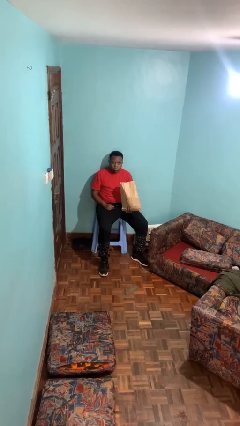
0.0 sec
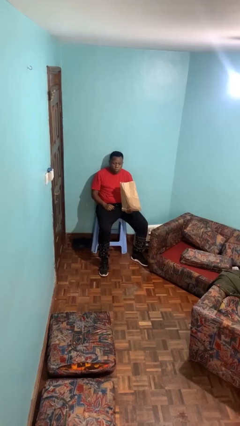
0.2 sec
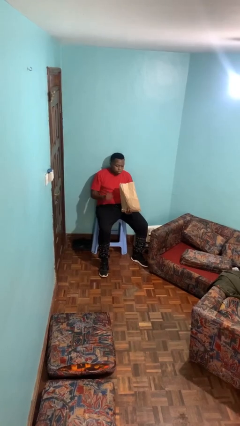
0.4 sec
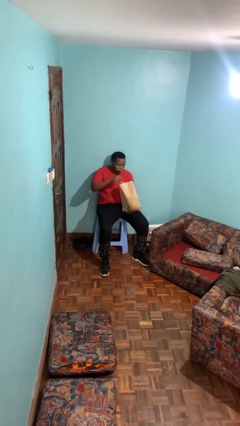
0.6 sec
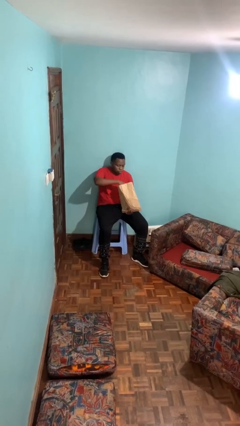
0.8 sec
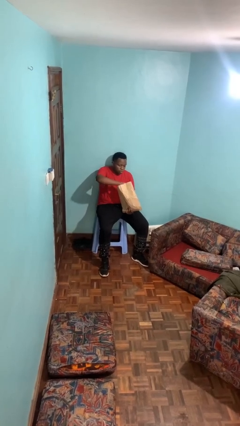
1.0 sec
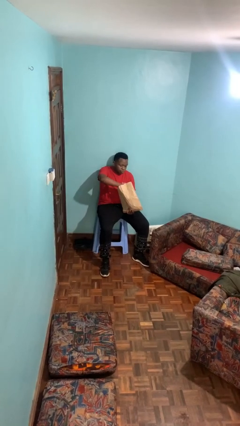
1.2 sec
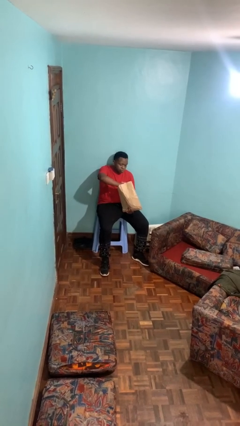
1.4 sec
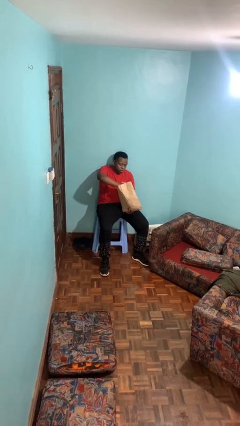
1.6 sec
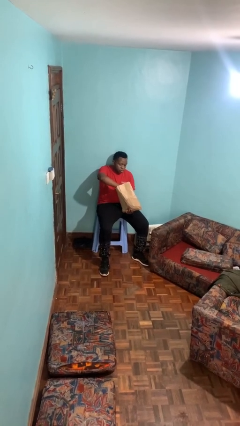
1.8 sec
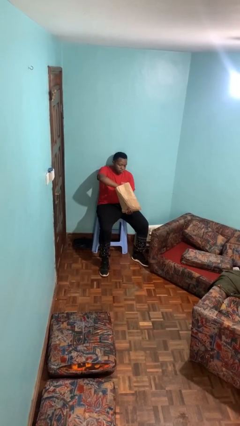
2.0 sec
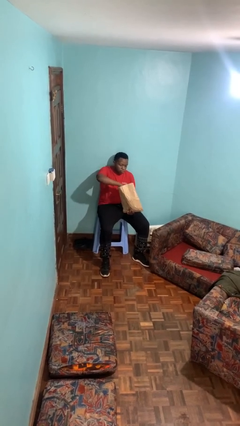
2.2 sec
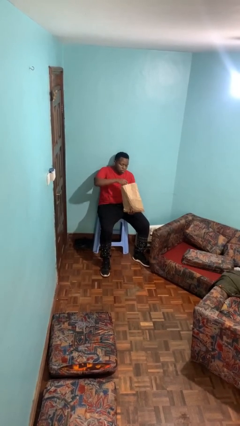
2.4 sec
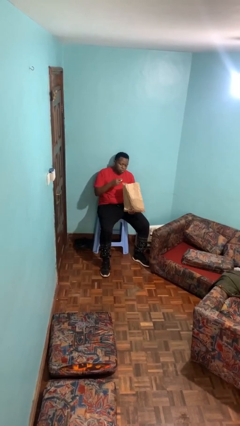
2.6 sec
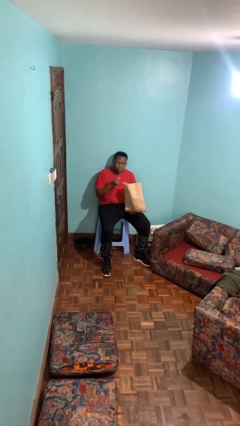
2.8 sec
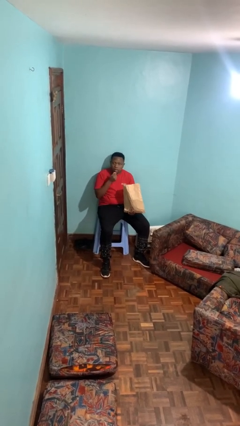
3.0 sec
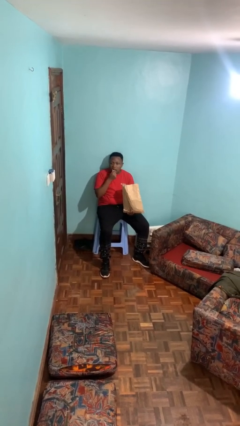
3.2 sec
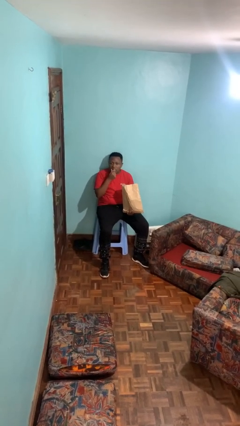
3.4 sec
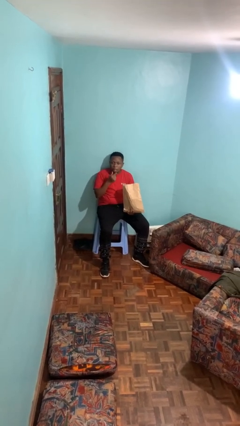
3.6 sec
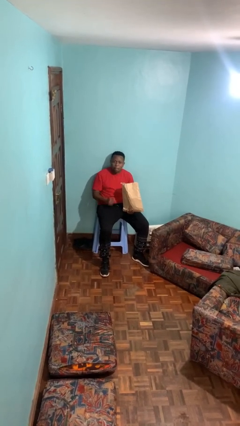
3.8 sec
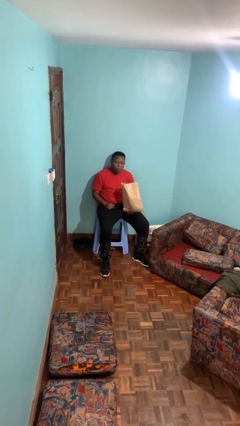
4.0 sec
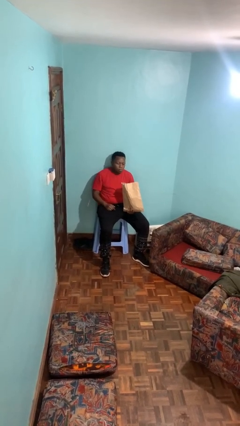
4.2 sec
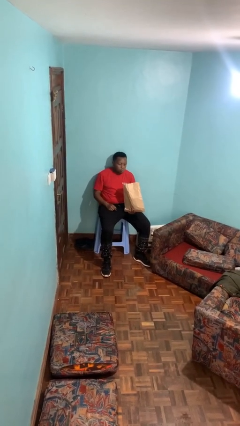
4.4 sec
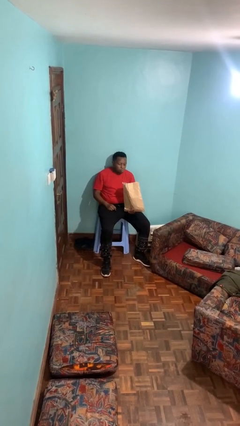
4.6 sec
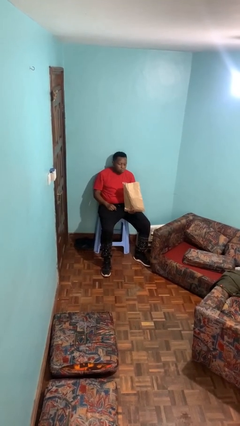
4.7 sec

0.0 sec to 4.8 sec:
person eats snack from bag

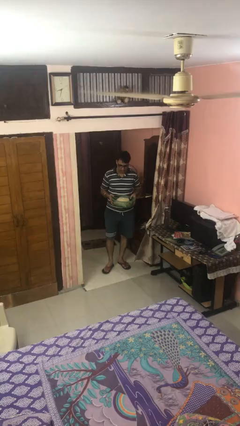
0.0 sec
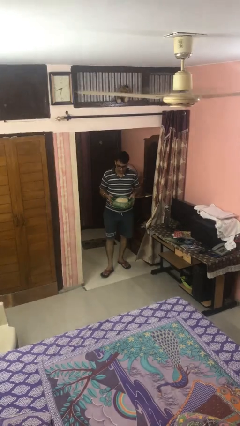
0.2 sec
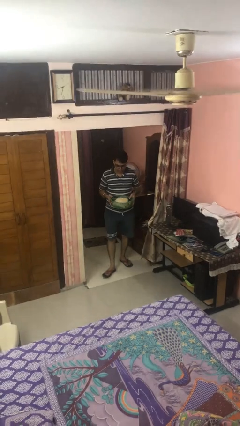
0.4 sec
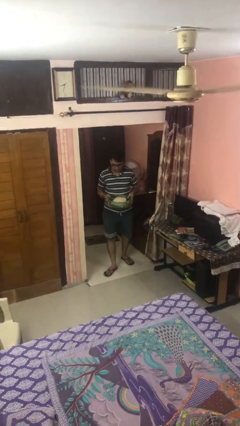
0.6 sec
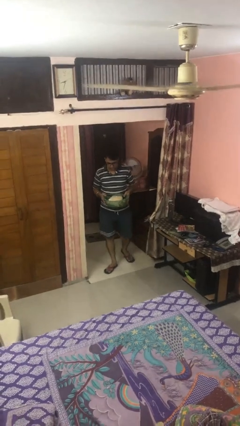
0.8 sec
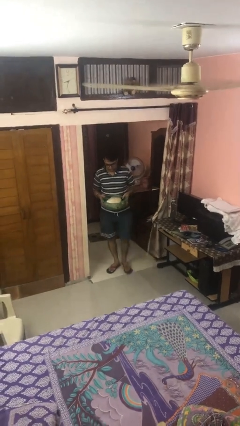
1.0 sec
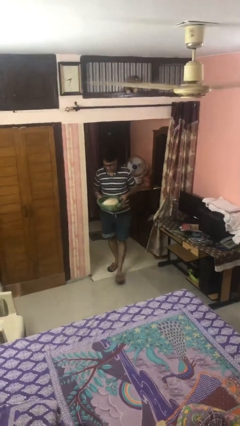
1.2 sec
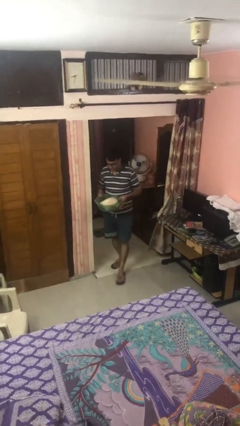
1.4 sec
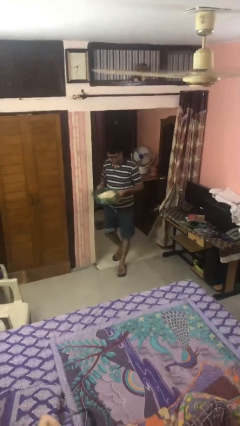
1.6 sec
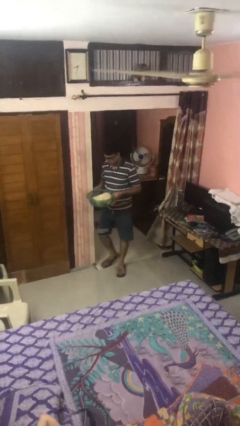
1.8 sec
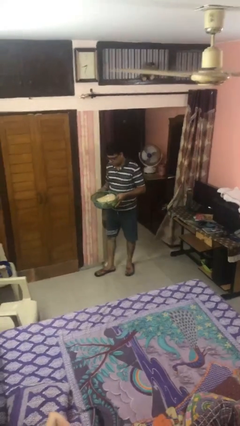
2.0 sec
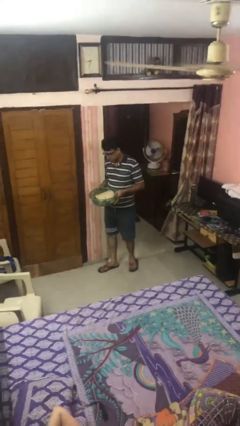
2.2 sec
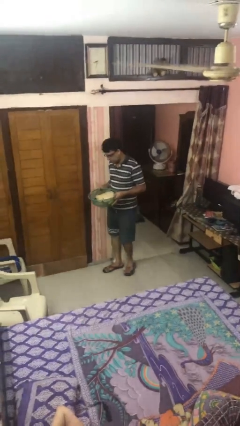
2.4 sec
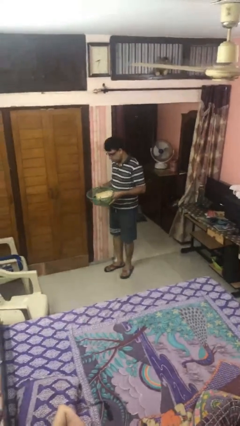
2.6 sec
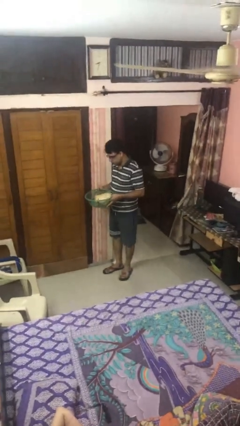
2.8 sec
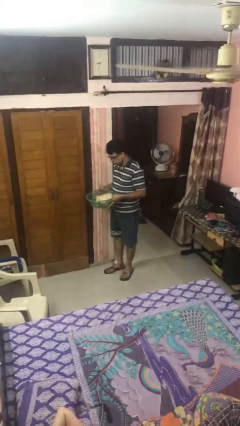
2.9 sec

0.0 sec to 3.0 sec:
person carries groceries

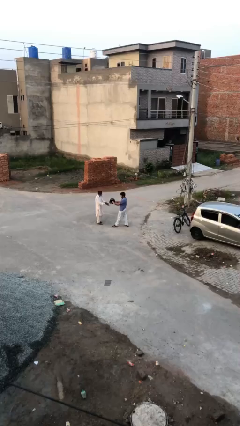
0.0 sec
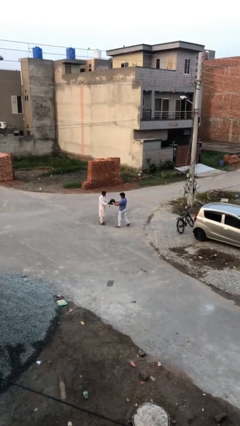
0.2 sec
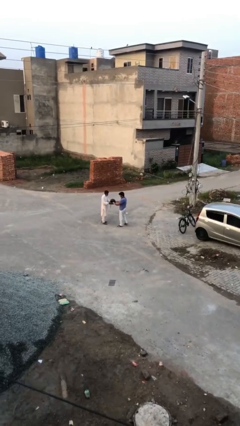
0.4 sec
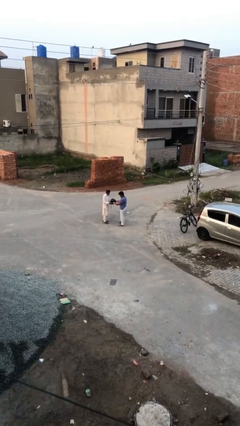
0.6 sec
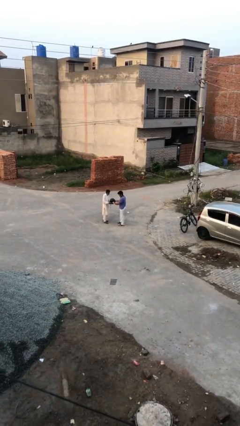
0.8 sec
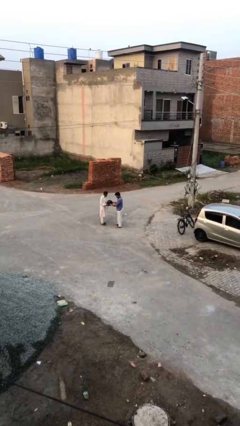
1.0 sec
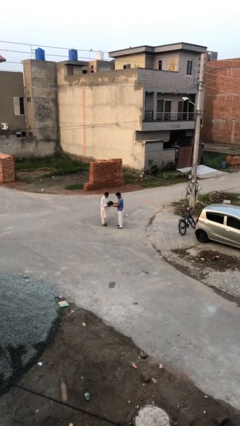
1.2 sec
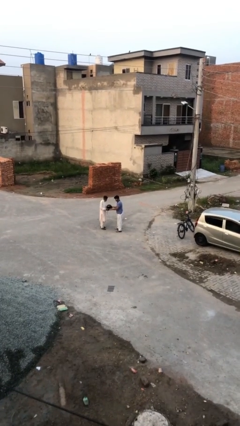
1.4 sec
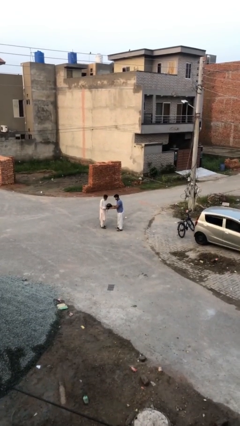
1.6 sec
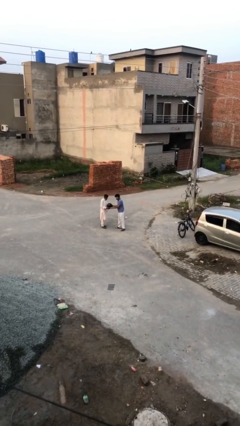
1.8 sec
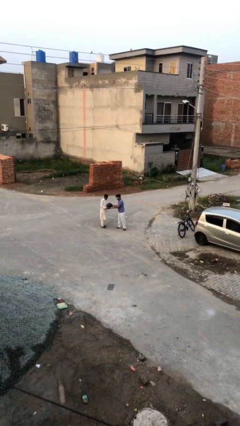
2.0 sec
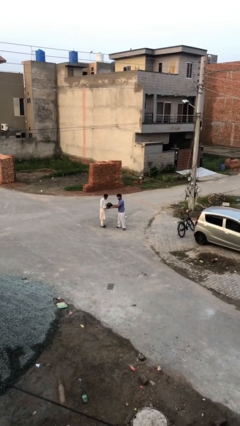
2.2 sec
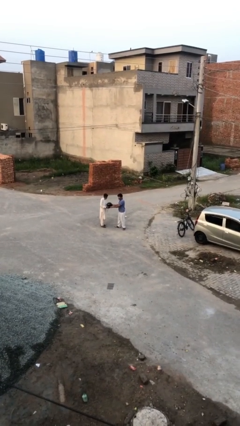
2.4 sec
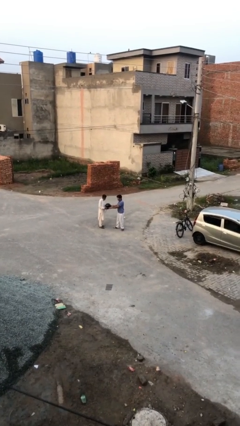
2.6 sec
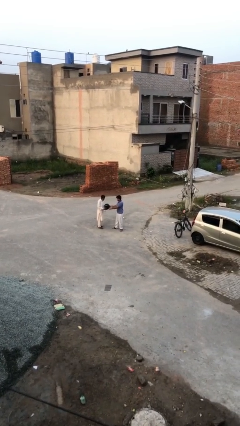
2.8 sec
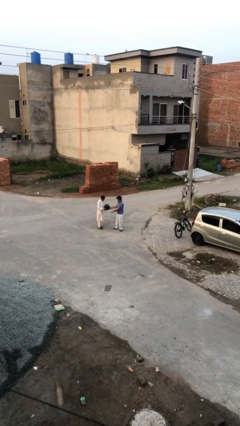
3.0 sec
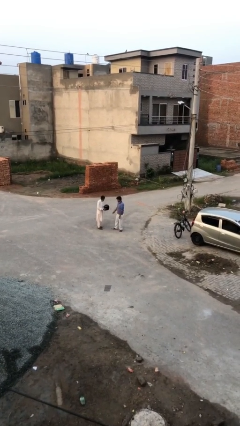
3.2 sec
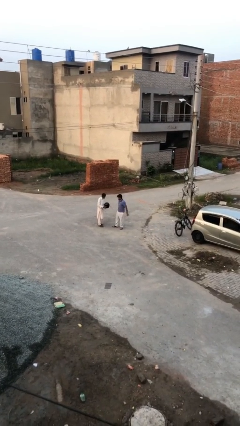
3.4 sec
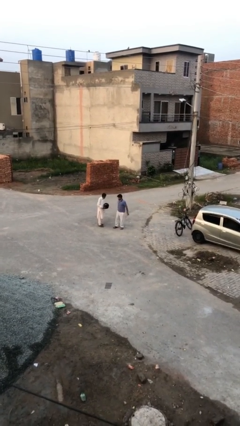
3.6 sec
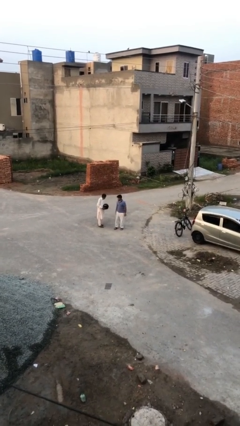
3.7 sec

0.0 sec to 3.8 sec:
person transfers object to person

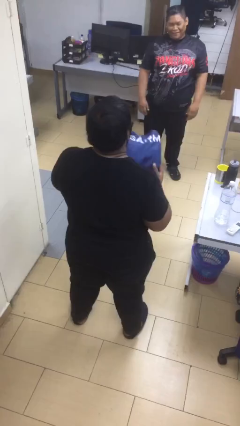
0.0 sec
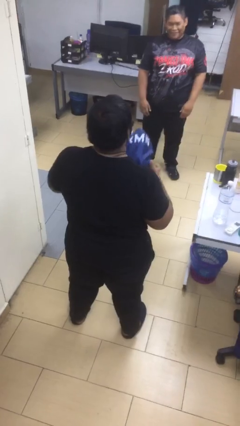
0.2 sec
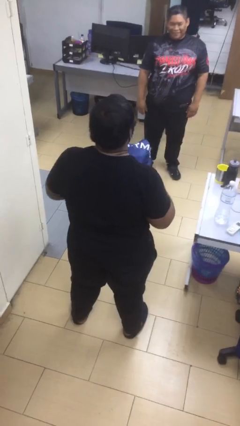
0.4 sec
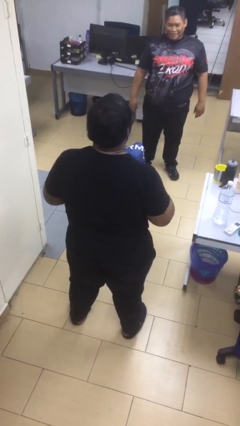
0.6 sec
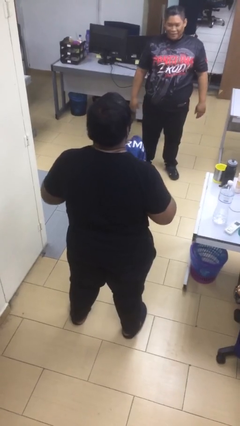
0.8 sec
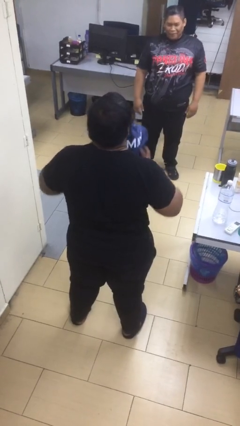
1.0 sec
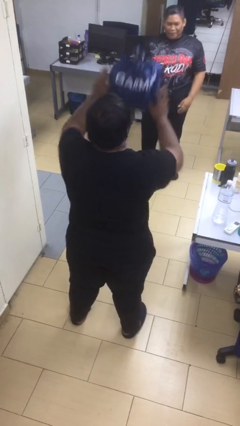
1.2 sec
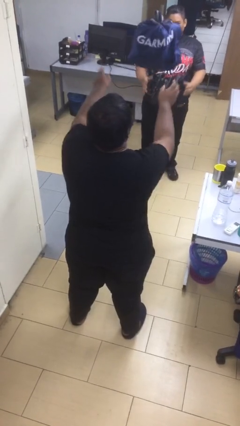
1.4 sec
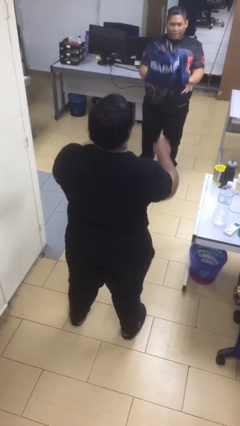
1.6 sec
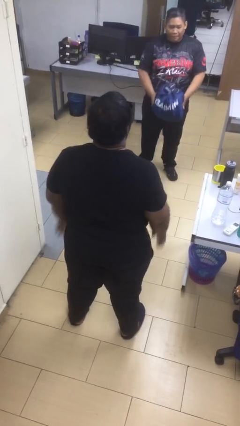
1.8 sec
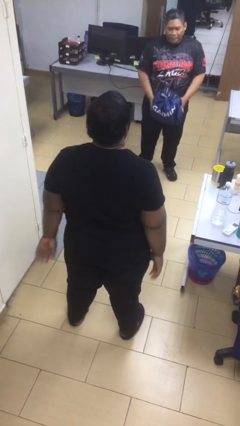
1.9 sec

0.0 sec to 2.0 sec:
person throws object to person

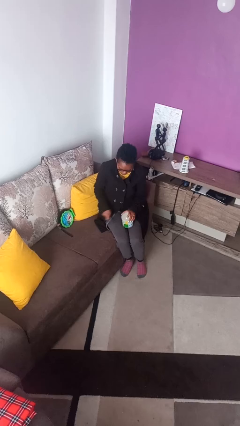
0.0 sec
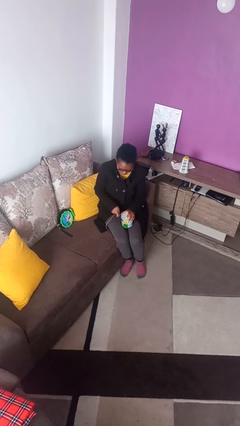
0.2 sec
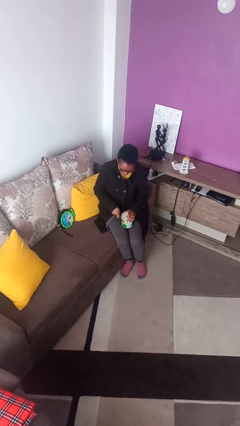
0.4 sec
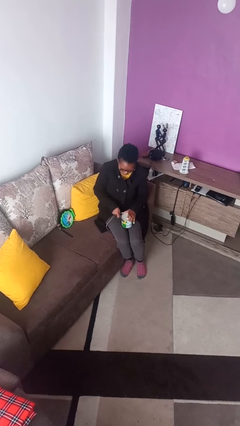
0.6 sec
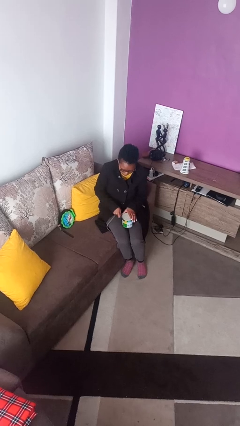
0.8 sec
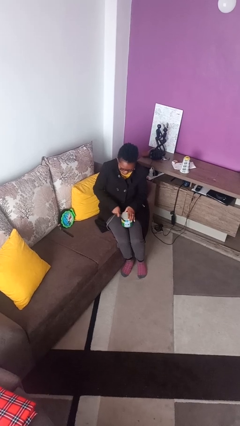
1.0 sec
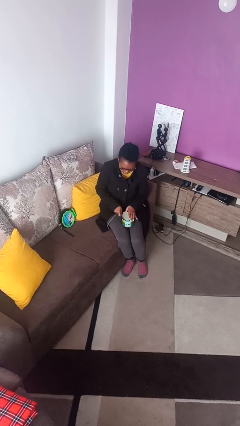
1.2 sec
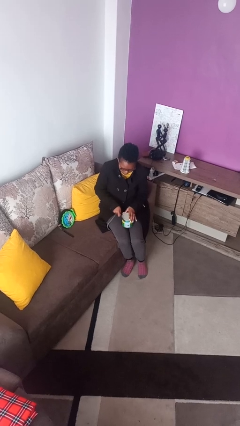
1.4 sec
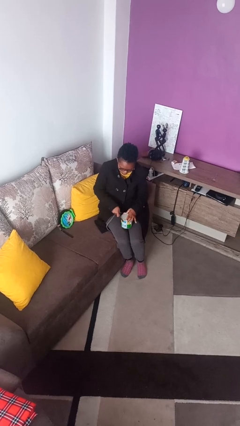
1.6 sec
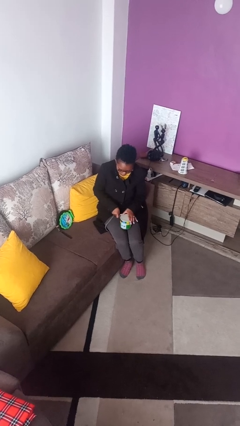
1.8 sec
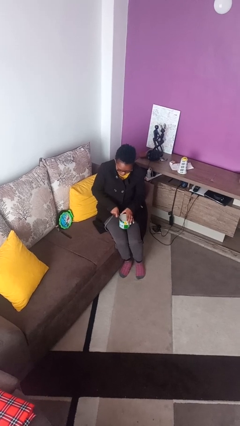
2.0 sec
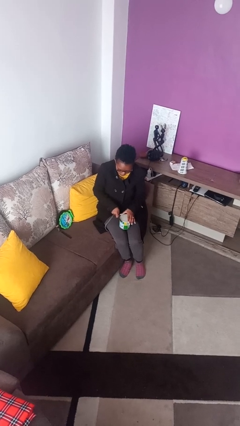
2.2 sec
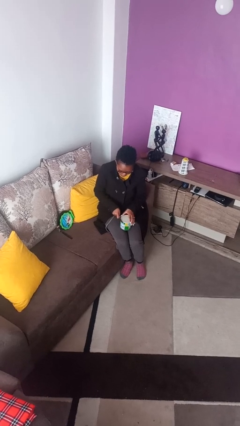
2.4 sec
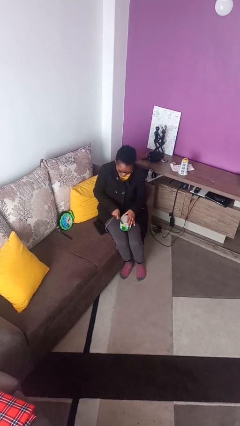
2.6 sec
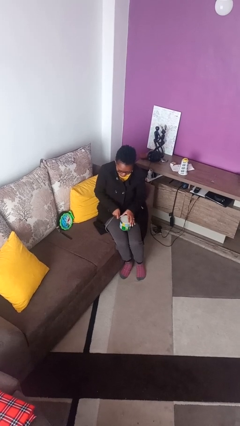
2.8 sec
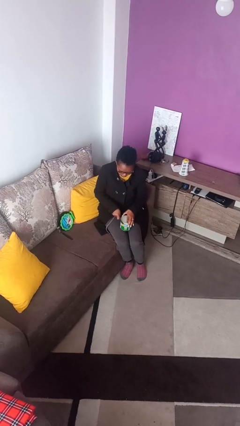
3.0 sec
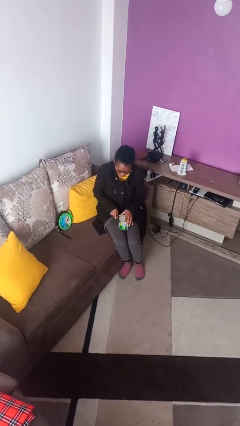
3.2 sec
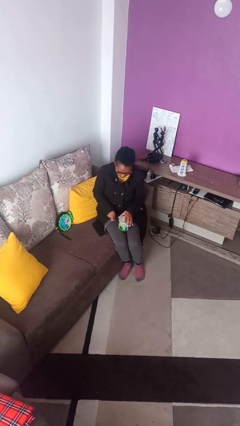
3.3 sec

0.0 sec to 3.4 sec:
person opens can with can opener

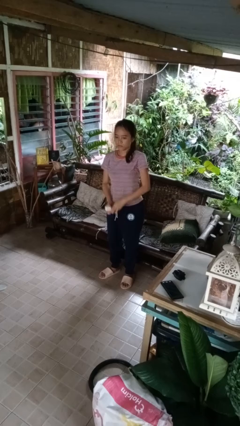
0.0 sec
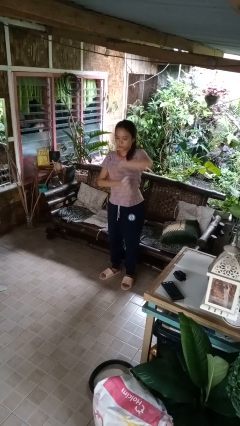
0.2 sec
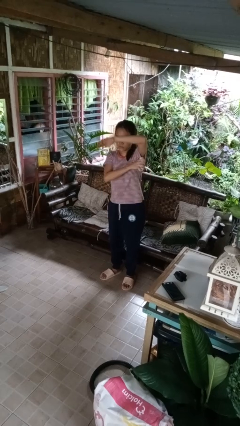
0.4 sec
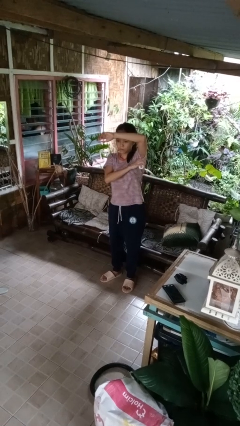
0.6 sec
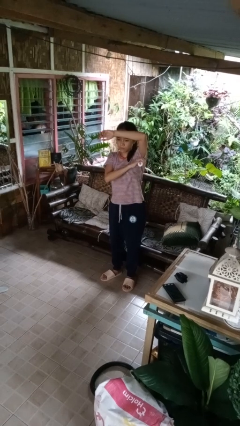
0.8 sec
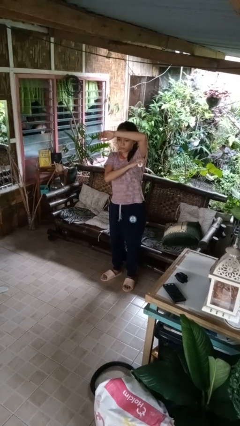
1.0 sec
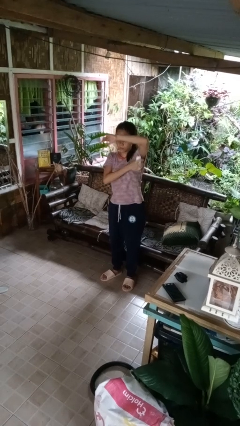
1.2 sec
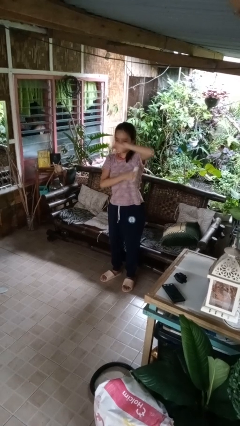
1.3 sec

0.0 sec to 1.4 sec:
person applies deodorant
